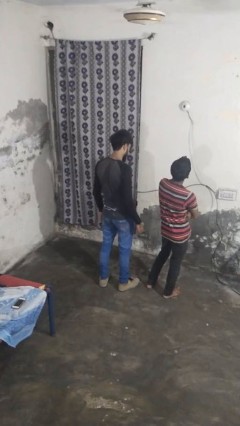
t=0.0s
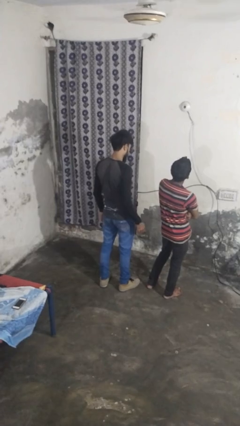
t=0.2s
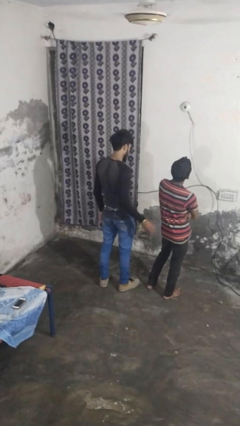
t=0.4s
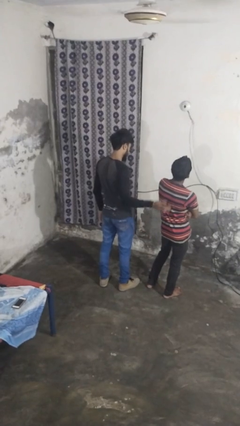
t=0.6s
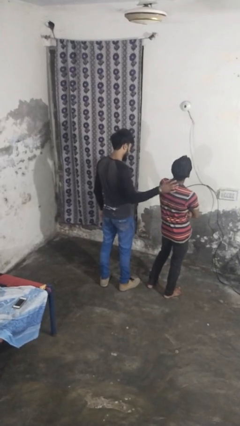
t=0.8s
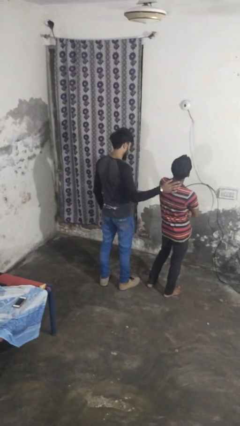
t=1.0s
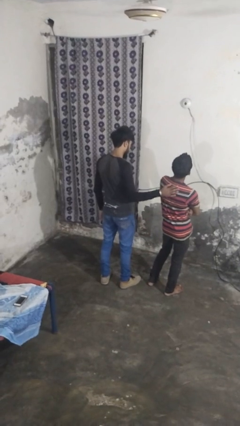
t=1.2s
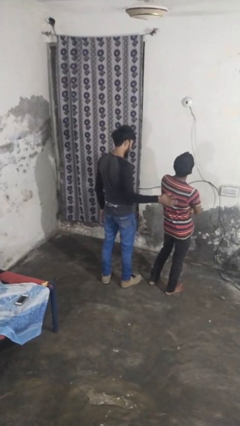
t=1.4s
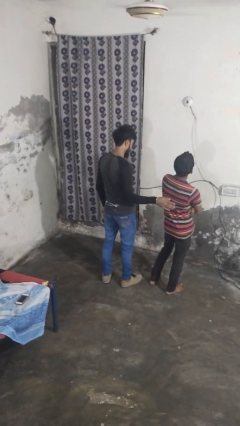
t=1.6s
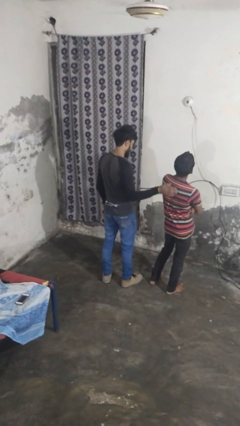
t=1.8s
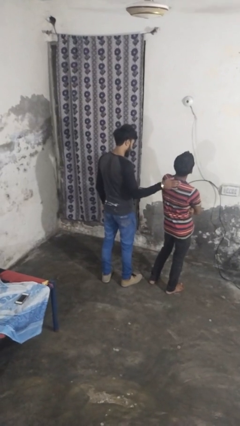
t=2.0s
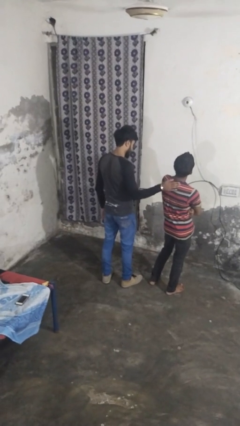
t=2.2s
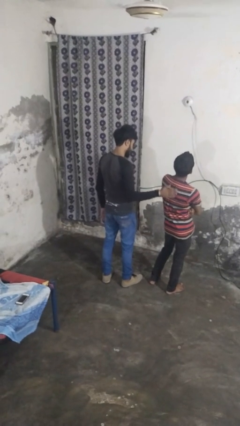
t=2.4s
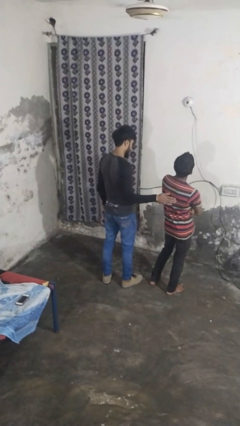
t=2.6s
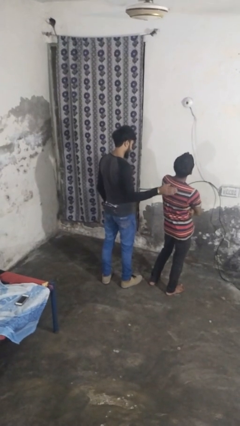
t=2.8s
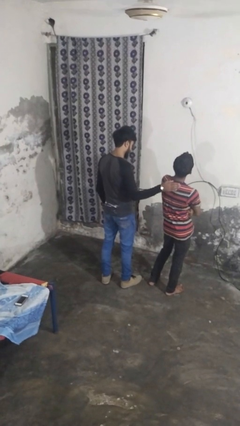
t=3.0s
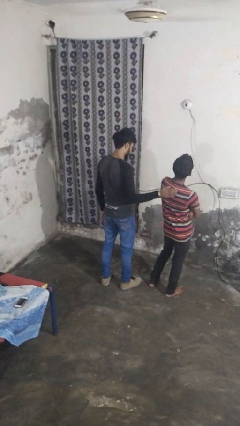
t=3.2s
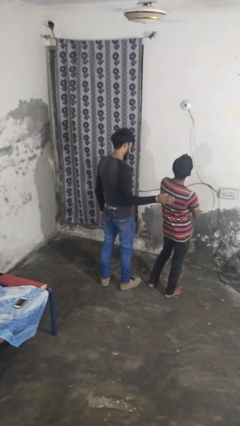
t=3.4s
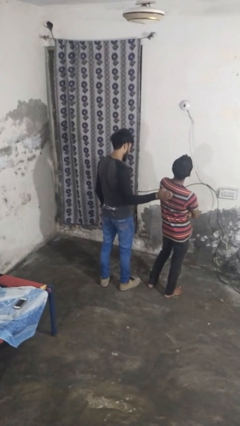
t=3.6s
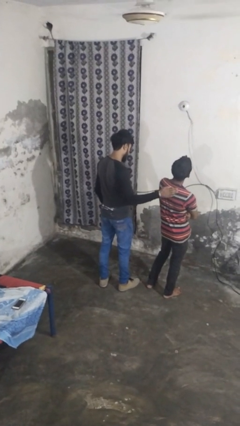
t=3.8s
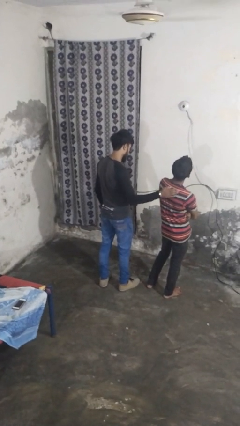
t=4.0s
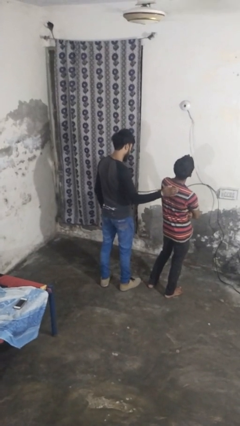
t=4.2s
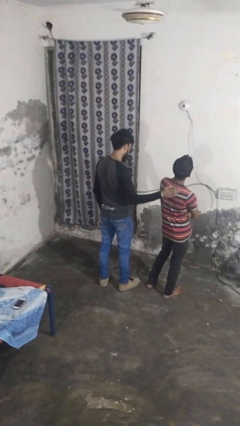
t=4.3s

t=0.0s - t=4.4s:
person touches back of person

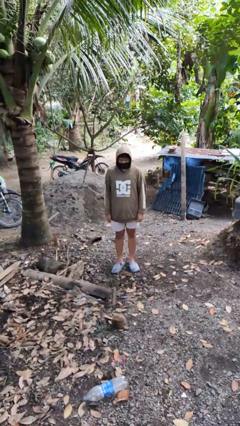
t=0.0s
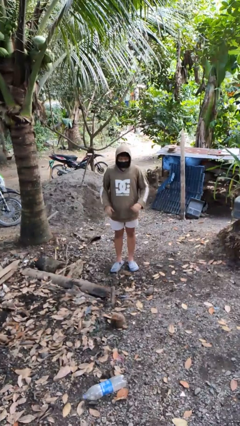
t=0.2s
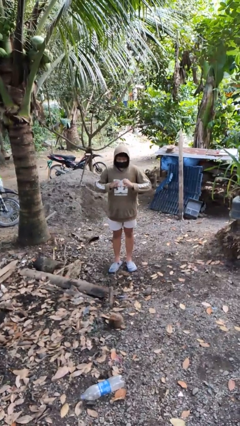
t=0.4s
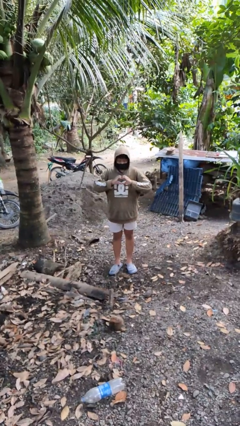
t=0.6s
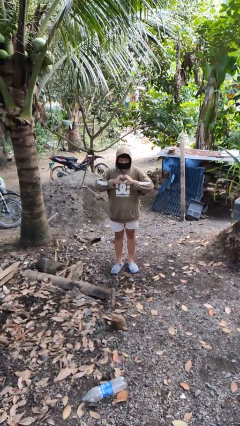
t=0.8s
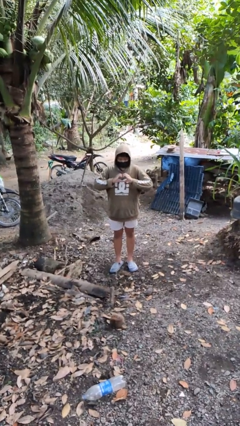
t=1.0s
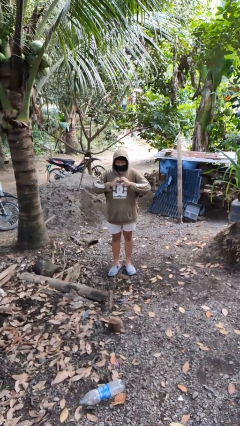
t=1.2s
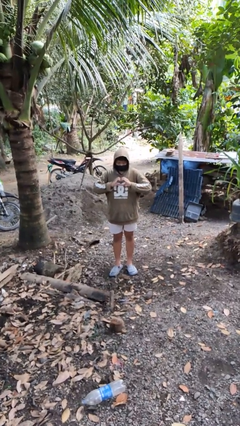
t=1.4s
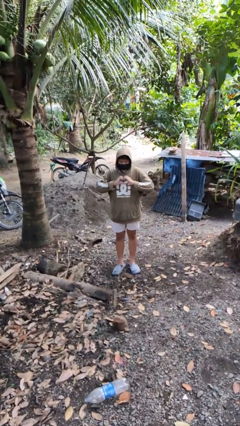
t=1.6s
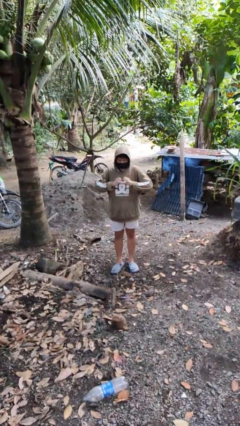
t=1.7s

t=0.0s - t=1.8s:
person gestures heart

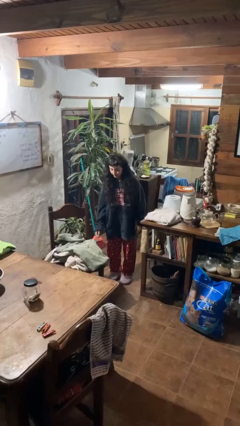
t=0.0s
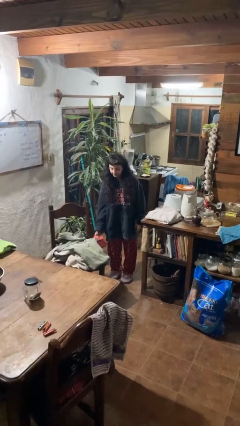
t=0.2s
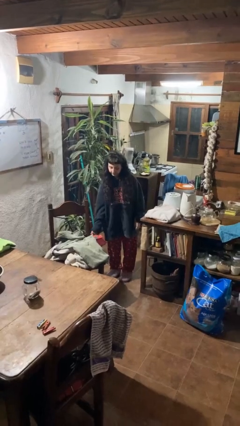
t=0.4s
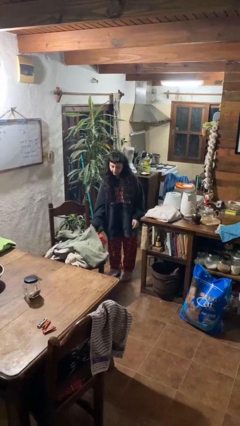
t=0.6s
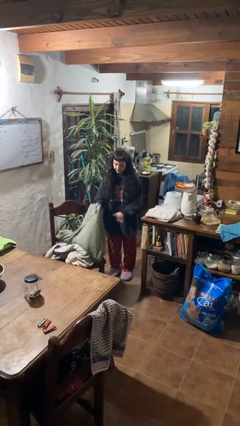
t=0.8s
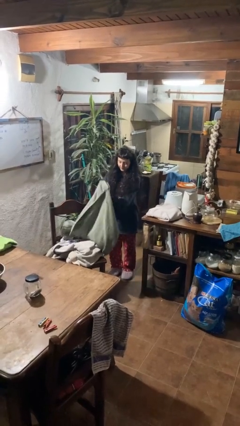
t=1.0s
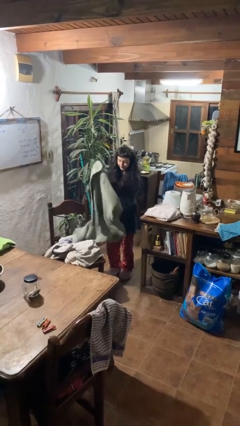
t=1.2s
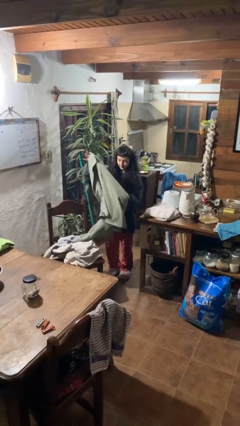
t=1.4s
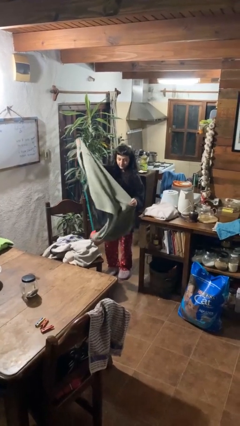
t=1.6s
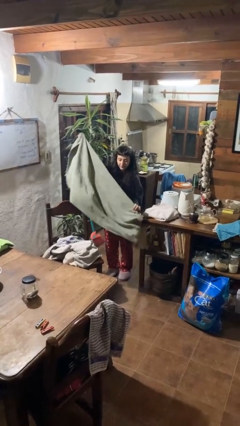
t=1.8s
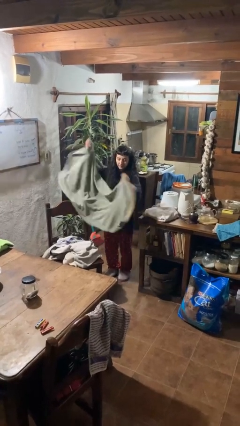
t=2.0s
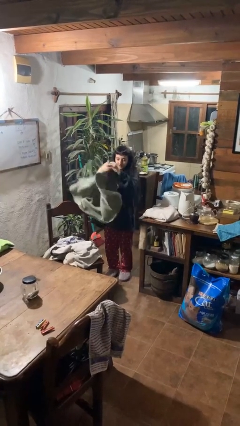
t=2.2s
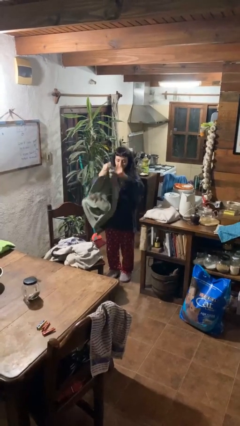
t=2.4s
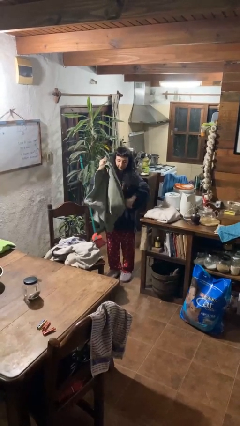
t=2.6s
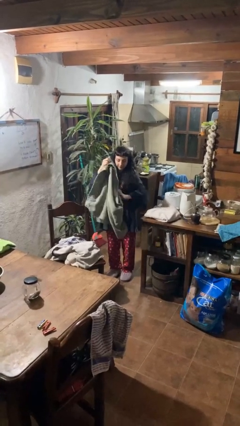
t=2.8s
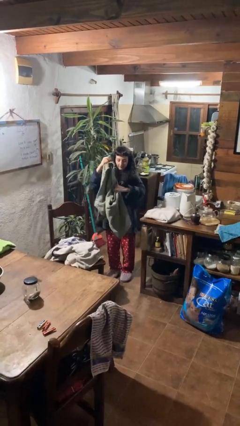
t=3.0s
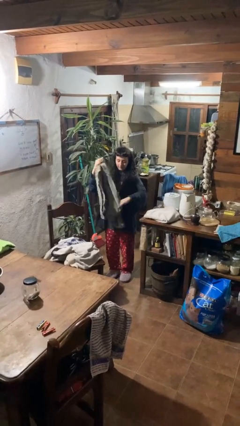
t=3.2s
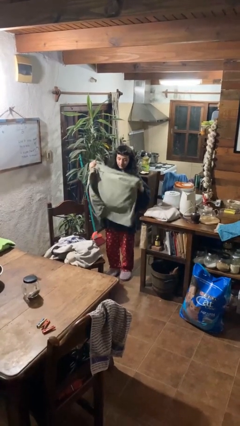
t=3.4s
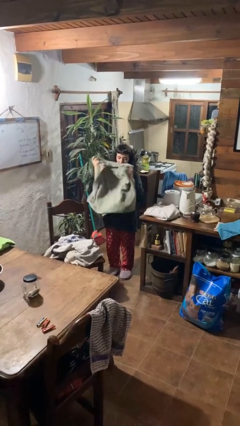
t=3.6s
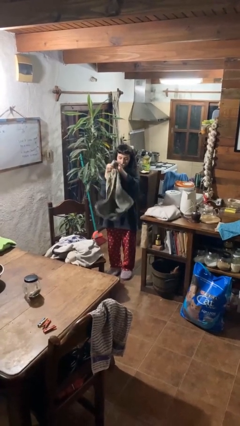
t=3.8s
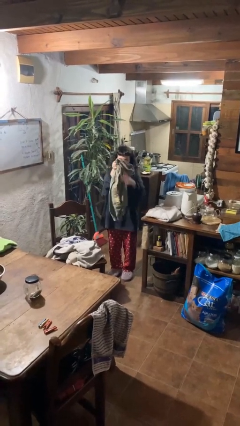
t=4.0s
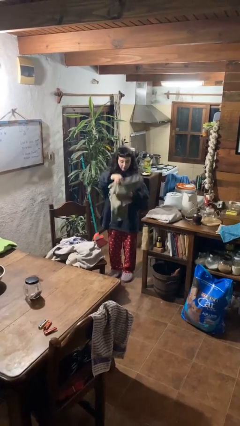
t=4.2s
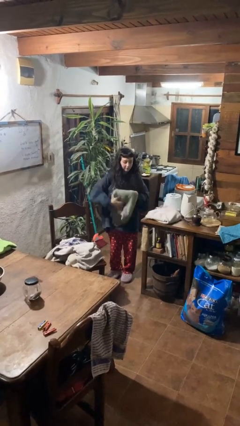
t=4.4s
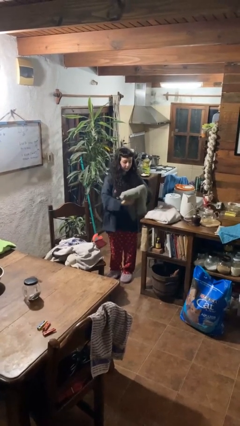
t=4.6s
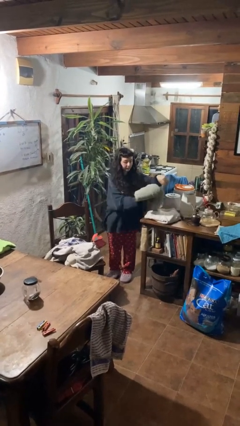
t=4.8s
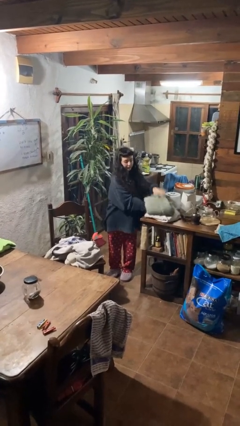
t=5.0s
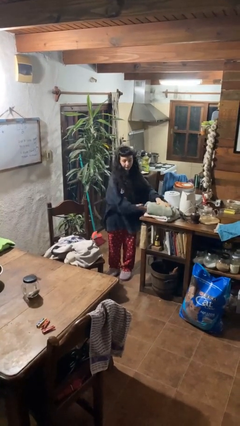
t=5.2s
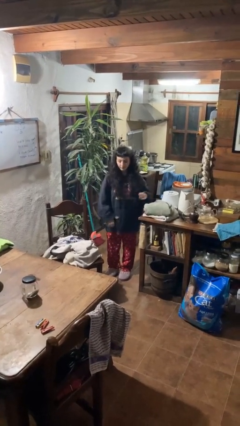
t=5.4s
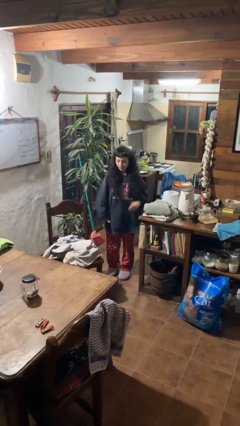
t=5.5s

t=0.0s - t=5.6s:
person folds towel

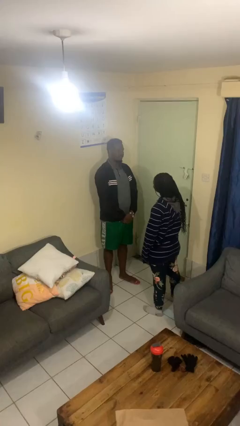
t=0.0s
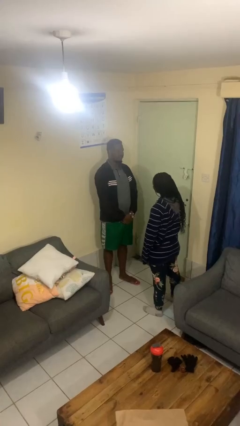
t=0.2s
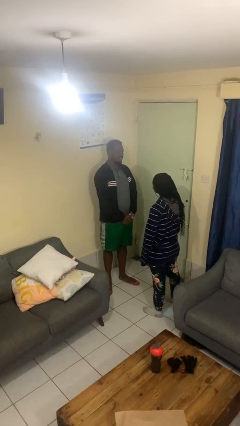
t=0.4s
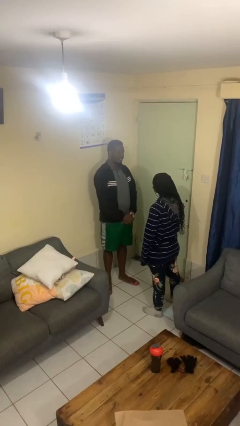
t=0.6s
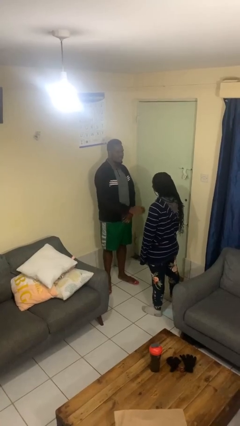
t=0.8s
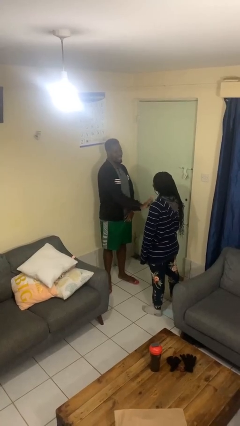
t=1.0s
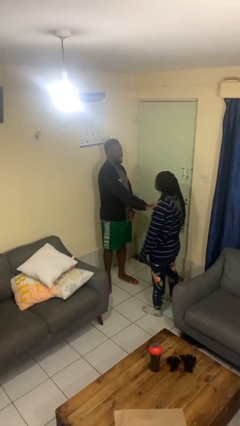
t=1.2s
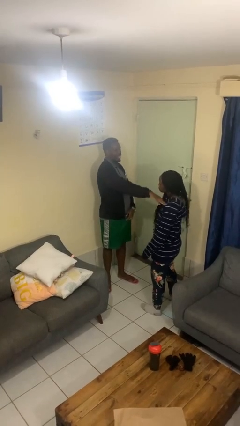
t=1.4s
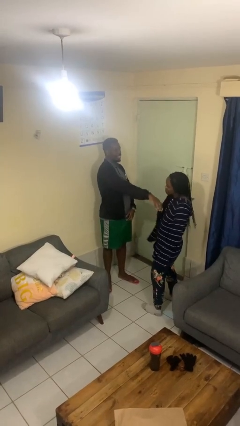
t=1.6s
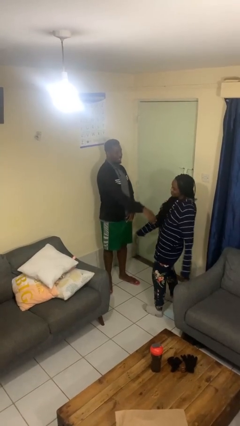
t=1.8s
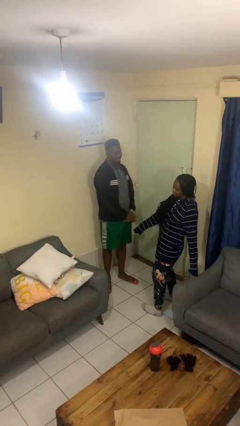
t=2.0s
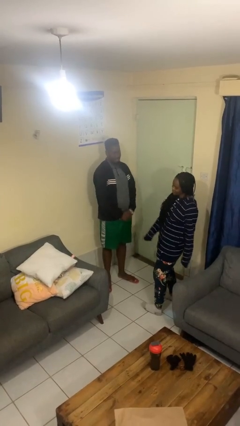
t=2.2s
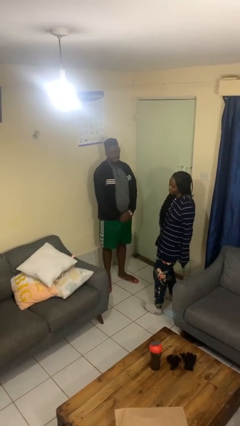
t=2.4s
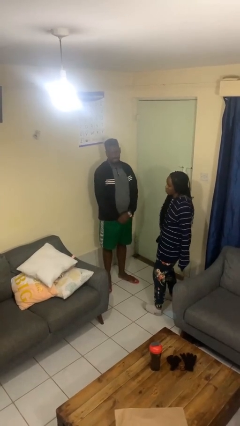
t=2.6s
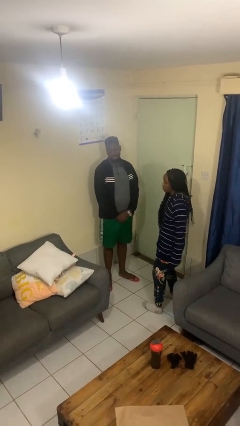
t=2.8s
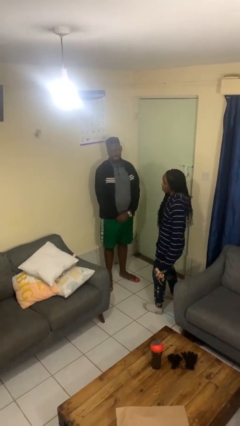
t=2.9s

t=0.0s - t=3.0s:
person shoves person

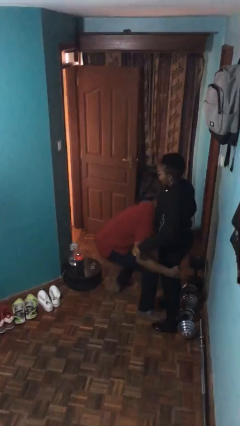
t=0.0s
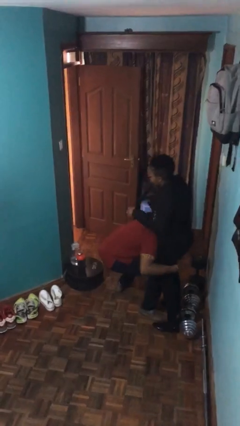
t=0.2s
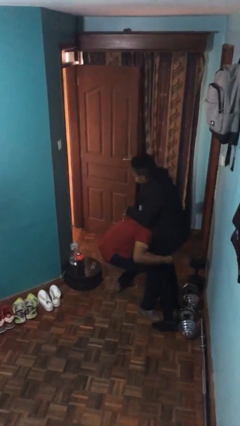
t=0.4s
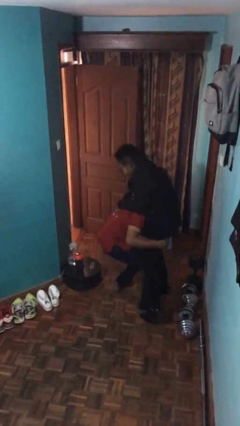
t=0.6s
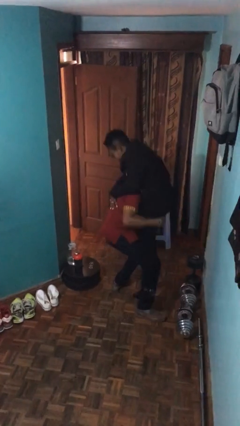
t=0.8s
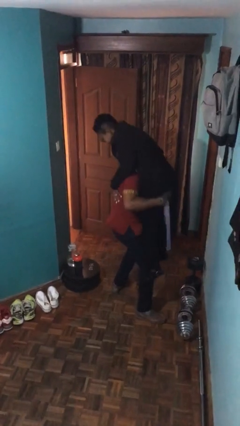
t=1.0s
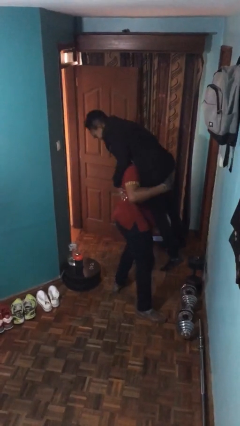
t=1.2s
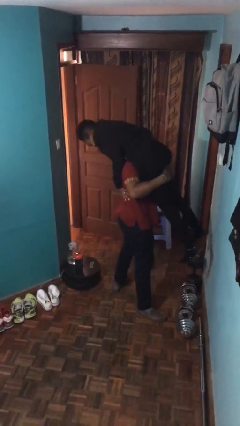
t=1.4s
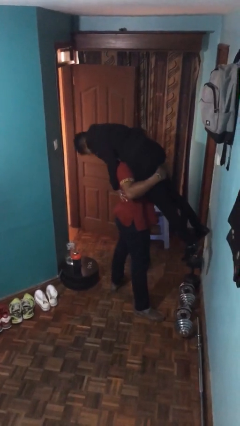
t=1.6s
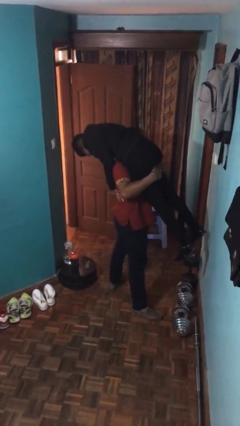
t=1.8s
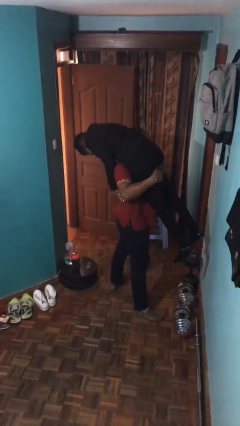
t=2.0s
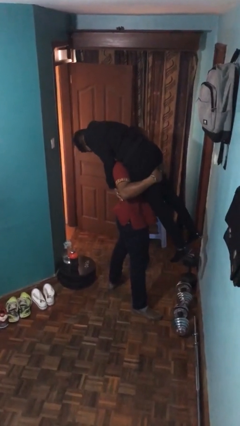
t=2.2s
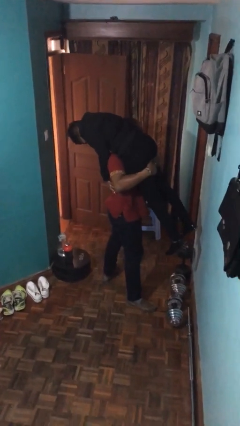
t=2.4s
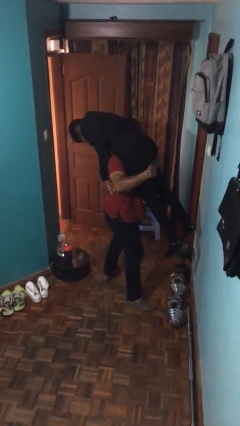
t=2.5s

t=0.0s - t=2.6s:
person carries person over shoulder

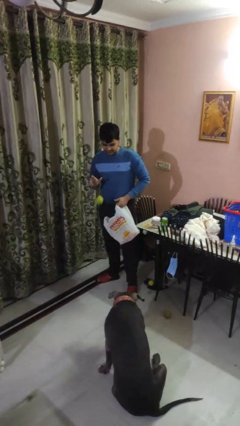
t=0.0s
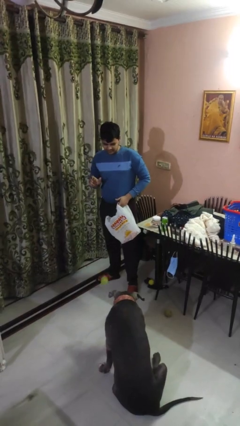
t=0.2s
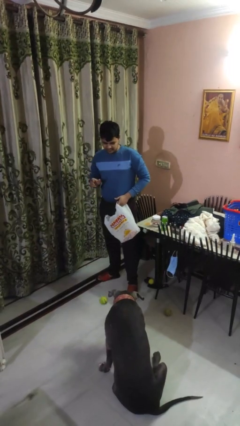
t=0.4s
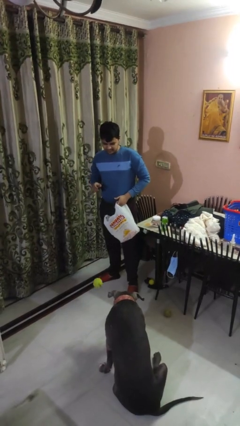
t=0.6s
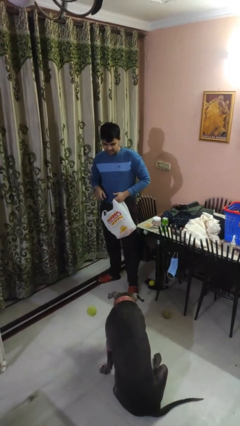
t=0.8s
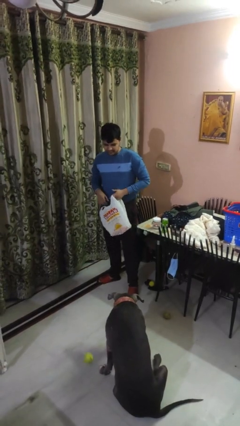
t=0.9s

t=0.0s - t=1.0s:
person throws object to dog
